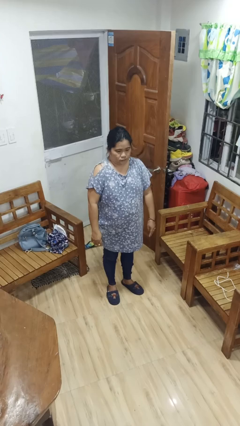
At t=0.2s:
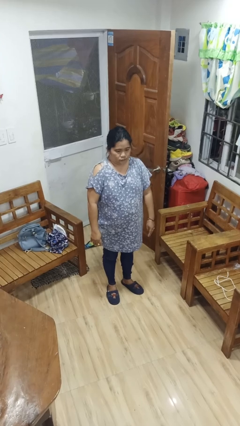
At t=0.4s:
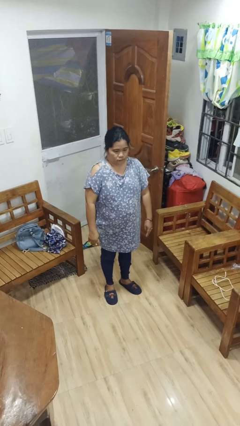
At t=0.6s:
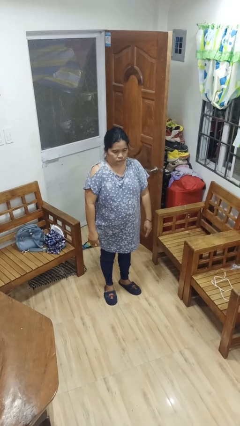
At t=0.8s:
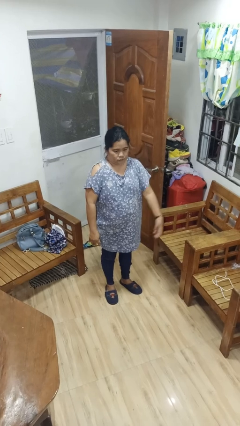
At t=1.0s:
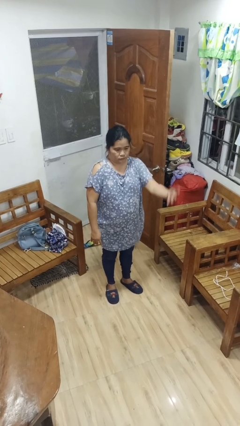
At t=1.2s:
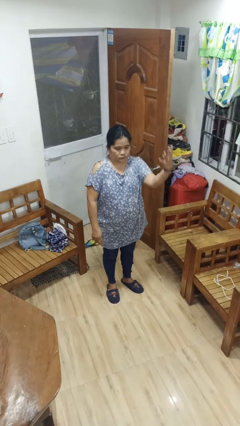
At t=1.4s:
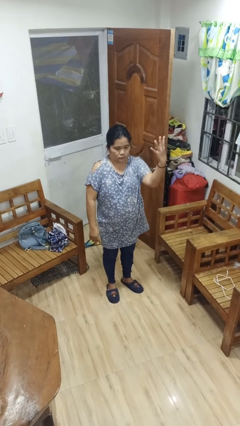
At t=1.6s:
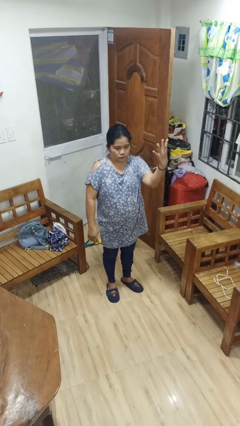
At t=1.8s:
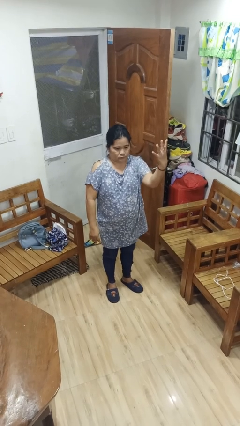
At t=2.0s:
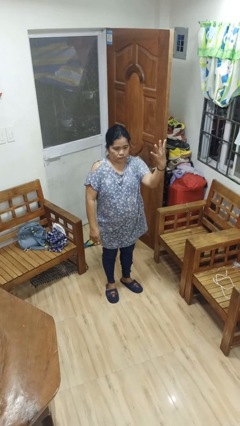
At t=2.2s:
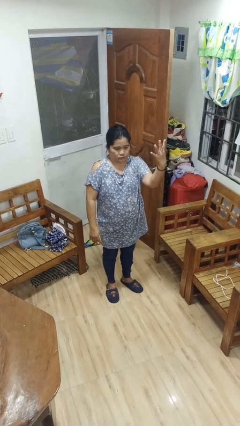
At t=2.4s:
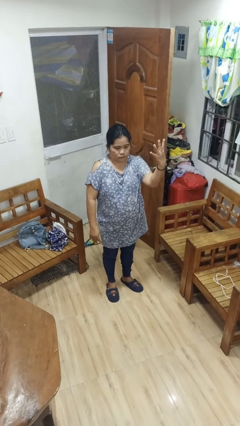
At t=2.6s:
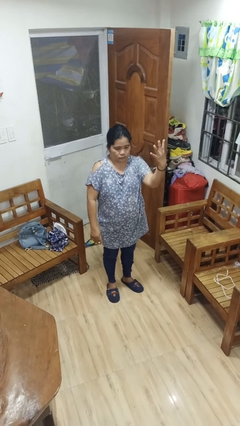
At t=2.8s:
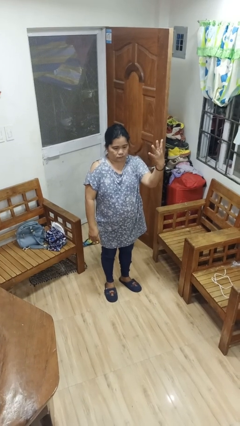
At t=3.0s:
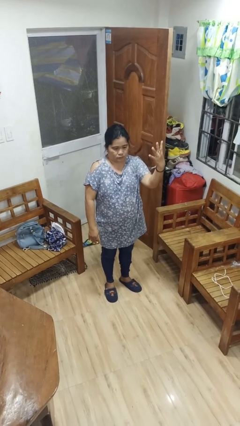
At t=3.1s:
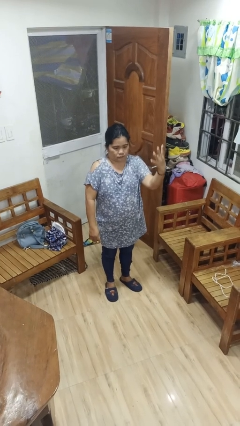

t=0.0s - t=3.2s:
person gestures number four

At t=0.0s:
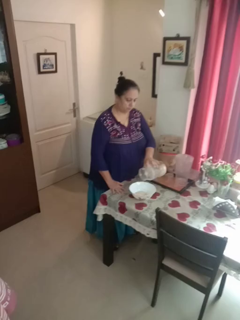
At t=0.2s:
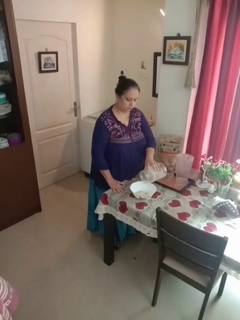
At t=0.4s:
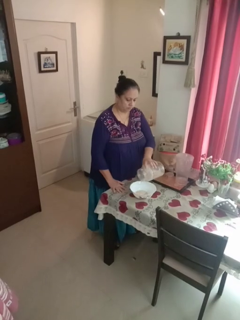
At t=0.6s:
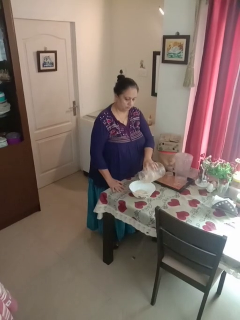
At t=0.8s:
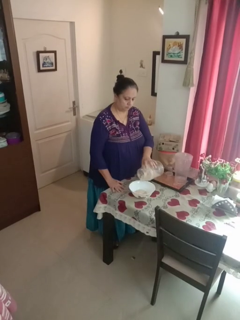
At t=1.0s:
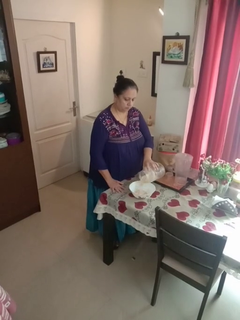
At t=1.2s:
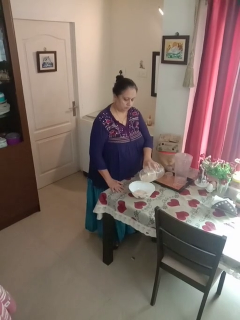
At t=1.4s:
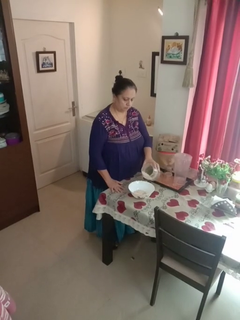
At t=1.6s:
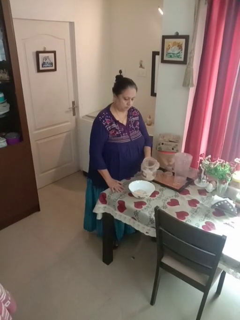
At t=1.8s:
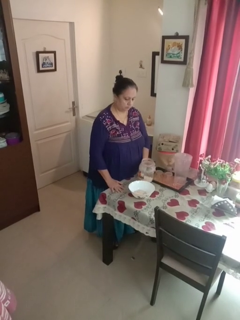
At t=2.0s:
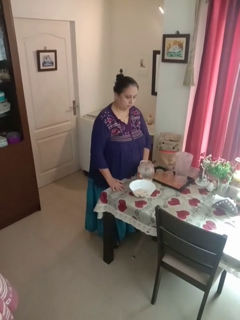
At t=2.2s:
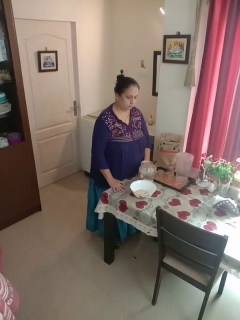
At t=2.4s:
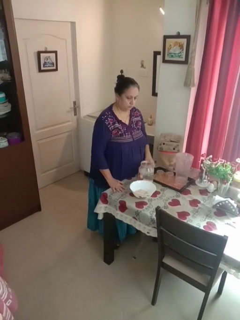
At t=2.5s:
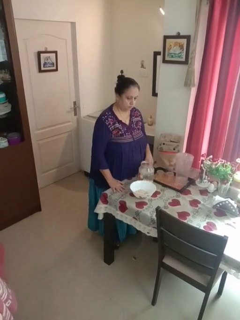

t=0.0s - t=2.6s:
person pours into bowl

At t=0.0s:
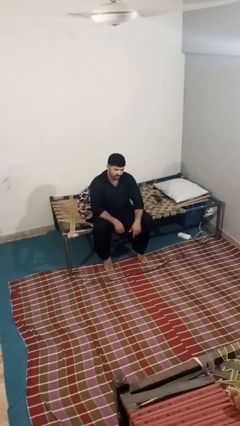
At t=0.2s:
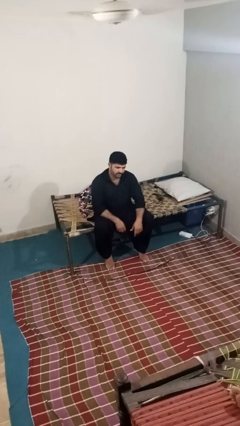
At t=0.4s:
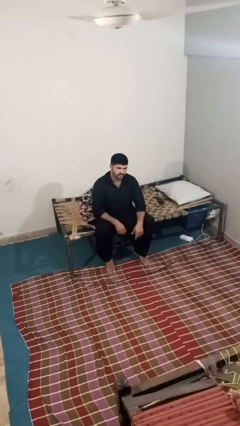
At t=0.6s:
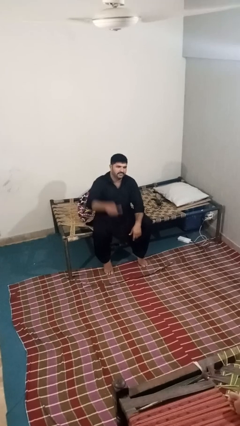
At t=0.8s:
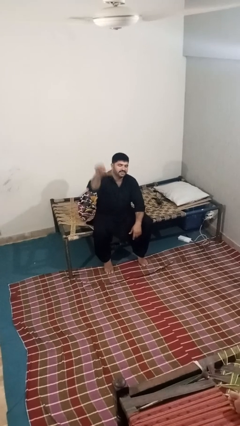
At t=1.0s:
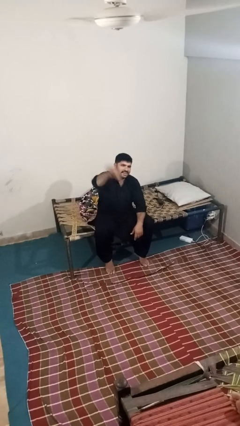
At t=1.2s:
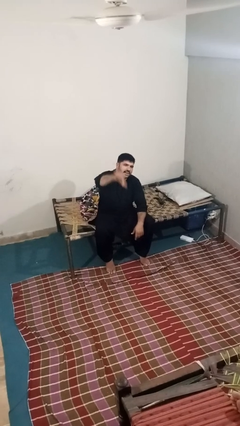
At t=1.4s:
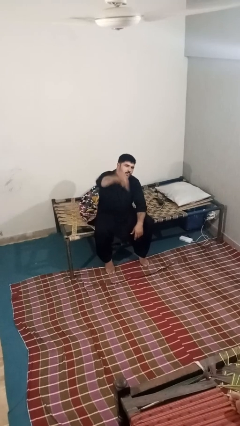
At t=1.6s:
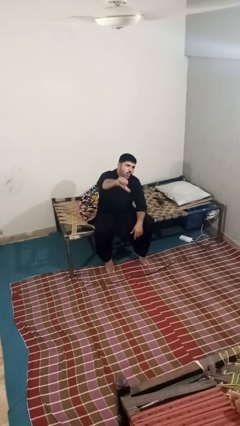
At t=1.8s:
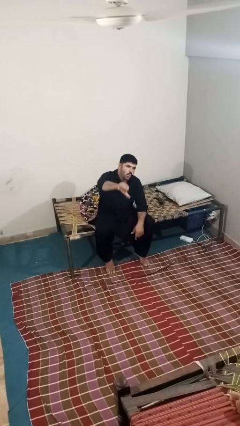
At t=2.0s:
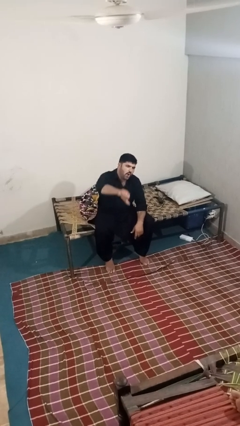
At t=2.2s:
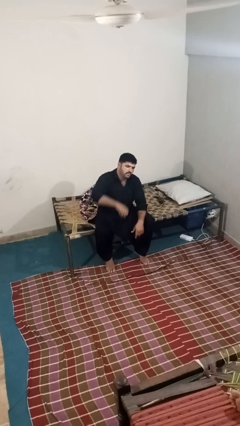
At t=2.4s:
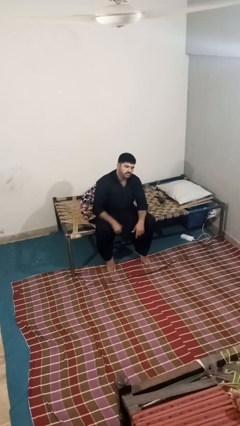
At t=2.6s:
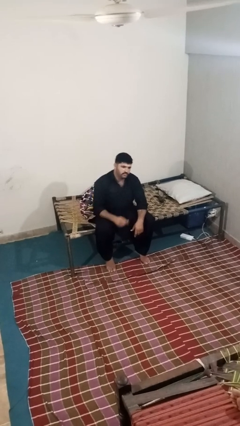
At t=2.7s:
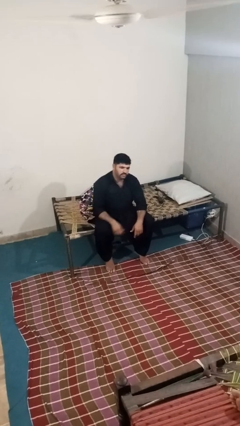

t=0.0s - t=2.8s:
person gestures thumbs down

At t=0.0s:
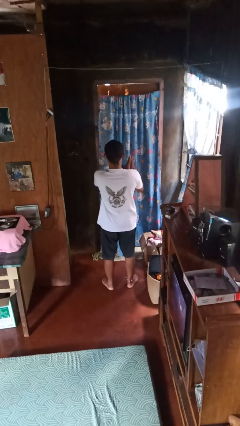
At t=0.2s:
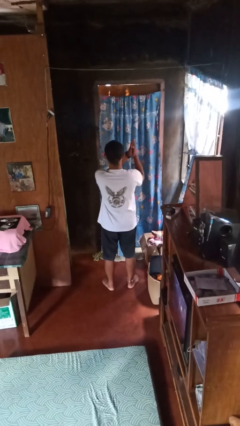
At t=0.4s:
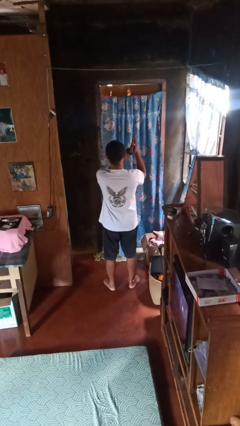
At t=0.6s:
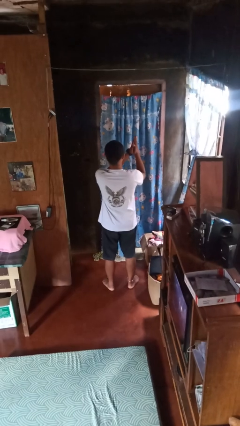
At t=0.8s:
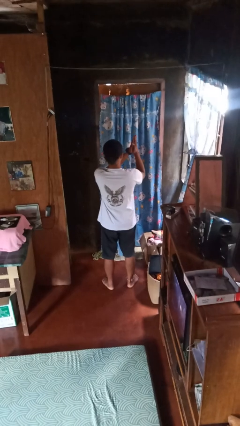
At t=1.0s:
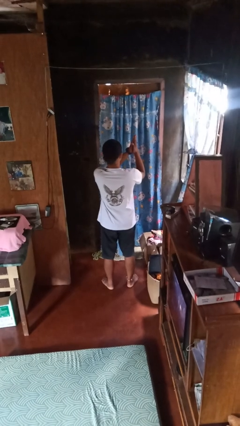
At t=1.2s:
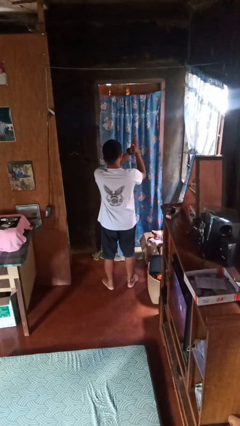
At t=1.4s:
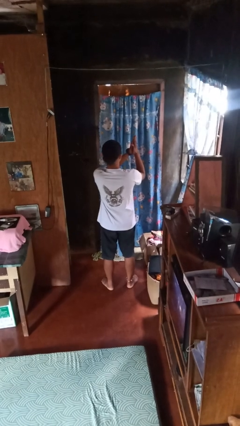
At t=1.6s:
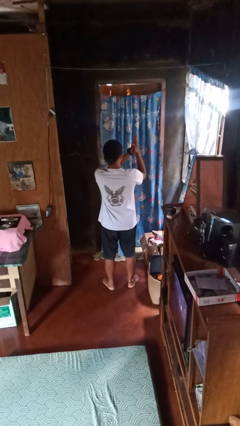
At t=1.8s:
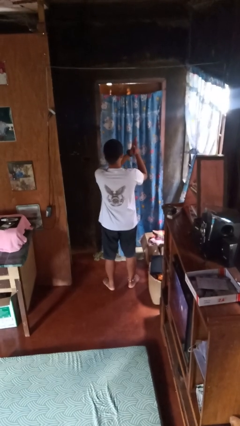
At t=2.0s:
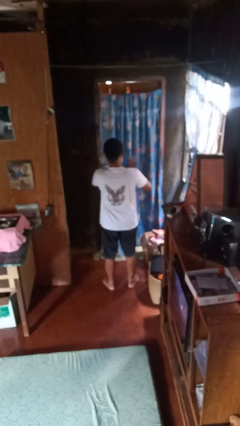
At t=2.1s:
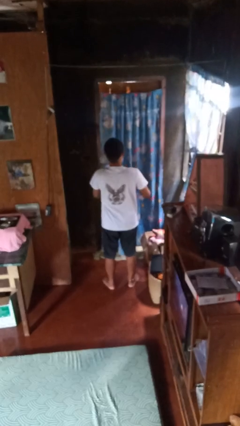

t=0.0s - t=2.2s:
person prays

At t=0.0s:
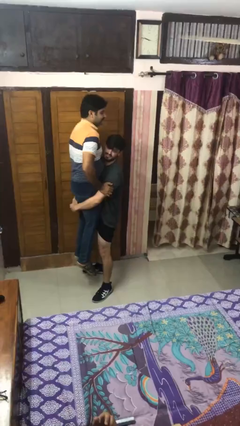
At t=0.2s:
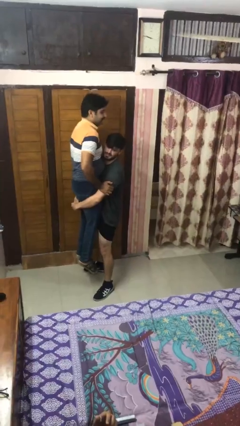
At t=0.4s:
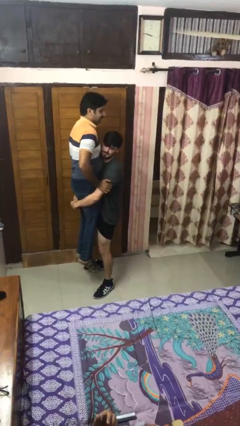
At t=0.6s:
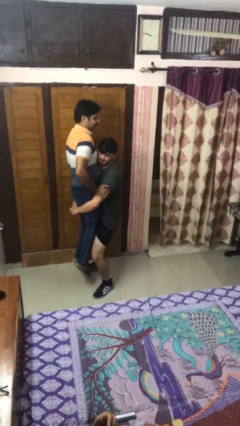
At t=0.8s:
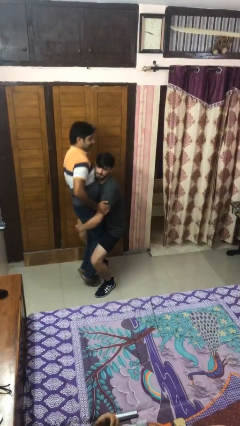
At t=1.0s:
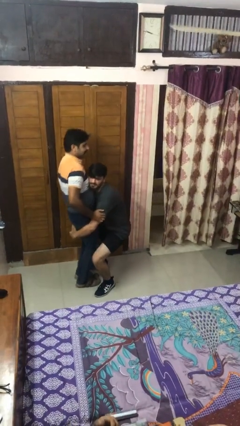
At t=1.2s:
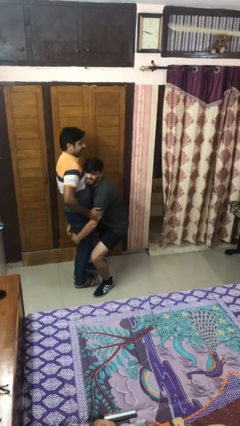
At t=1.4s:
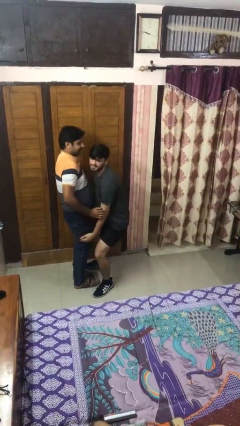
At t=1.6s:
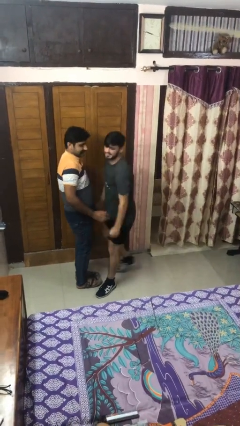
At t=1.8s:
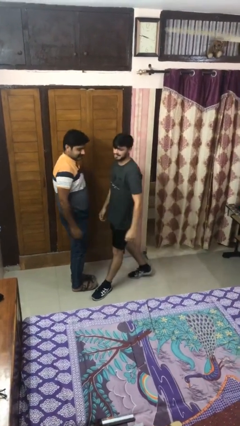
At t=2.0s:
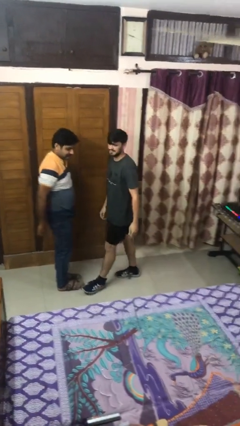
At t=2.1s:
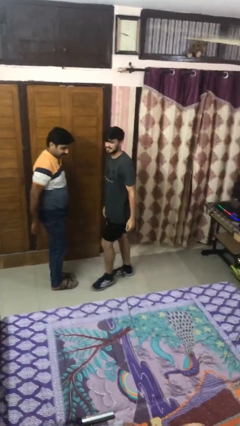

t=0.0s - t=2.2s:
person puts down person

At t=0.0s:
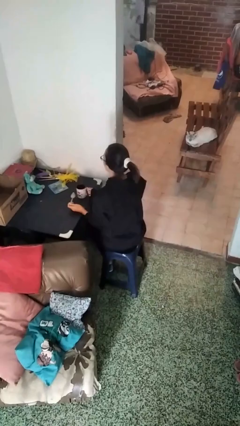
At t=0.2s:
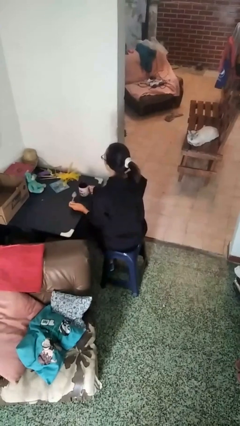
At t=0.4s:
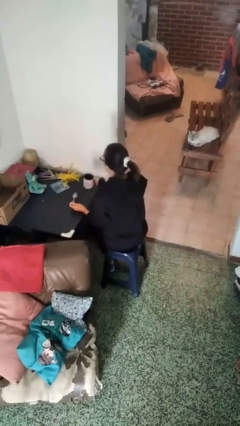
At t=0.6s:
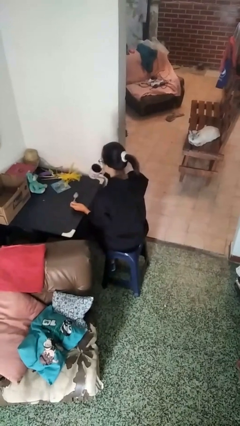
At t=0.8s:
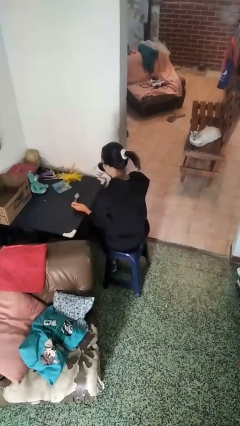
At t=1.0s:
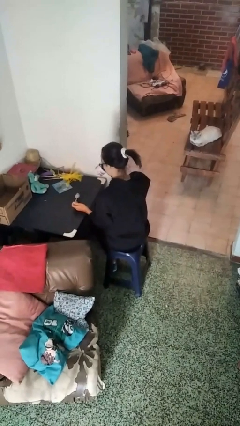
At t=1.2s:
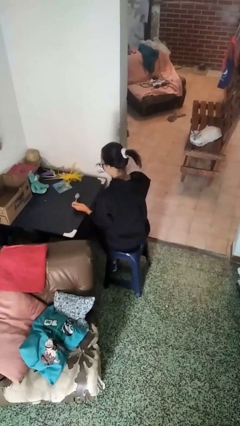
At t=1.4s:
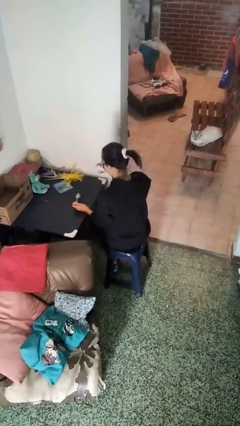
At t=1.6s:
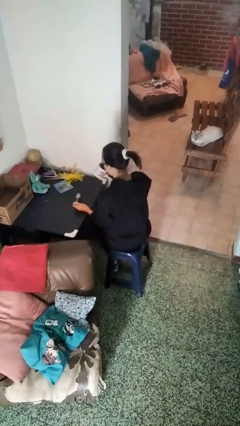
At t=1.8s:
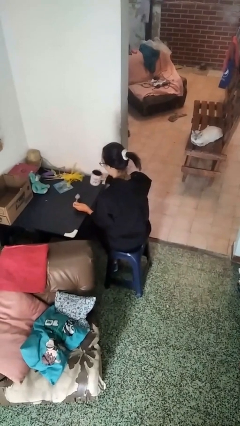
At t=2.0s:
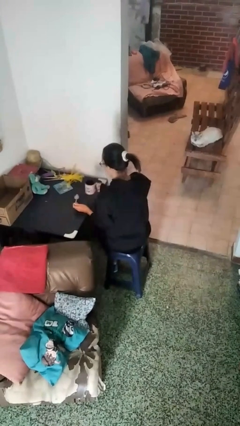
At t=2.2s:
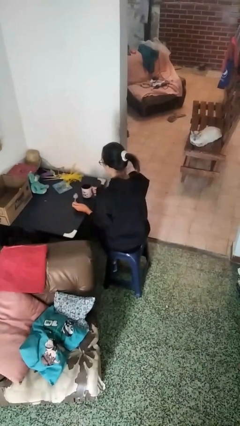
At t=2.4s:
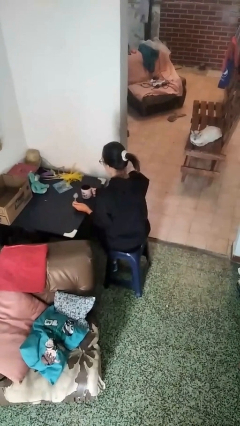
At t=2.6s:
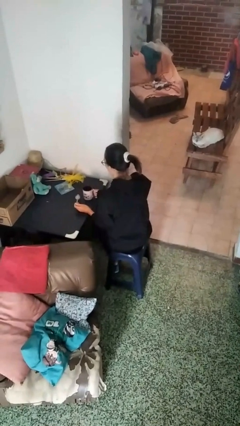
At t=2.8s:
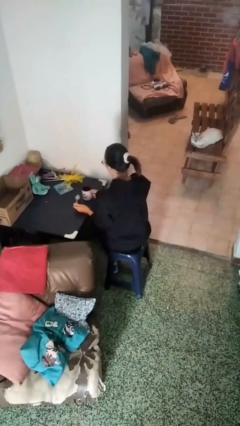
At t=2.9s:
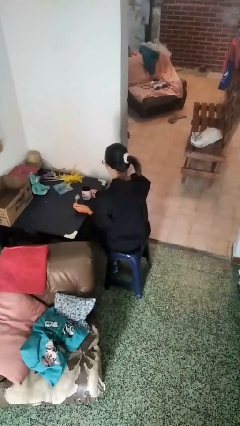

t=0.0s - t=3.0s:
person drinks from mug

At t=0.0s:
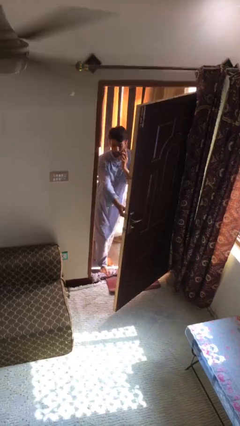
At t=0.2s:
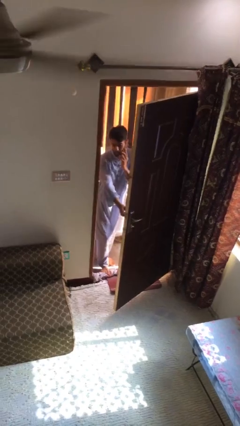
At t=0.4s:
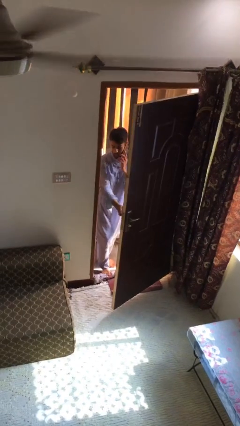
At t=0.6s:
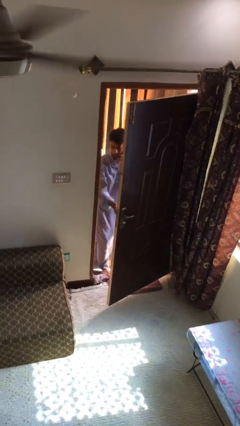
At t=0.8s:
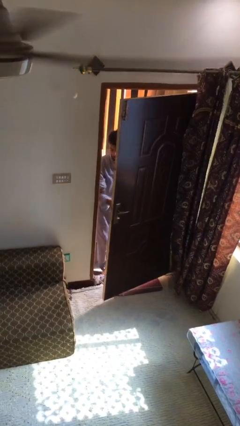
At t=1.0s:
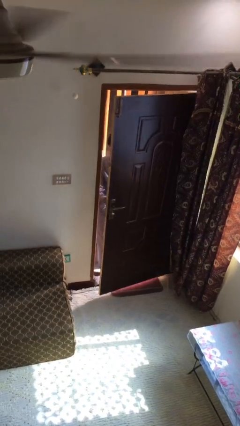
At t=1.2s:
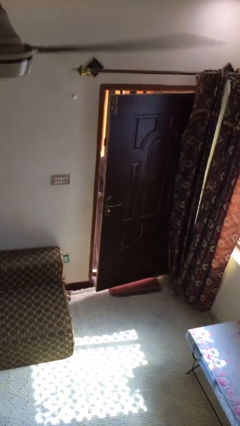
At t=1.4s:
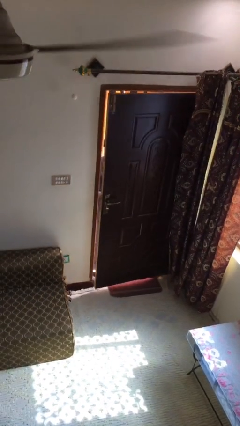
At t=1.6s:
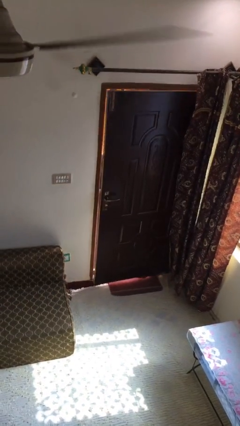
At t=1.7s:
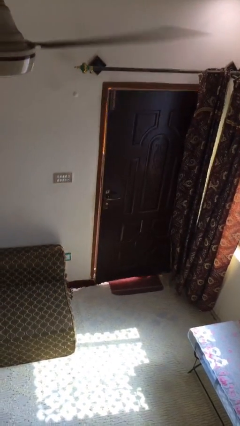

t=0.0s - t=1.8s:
person closes facility door

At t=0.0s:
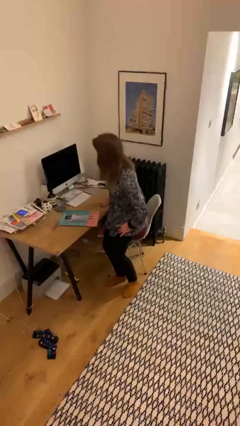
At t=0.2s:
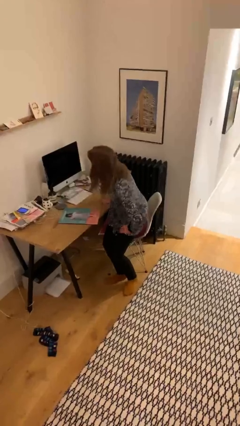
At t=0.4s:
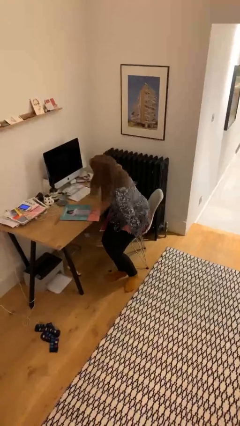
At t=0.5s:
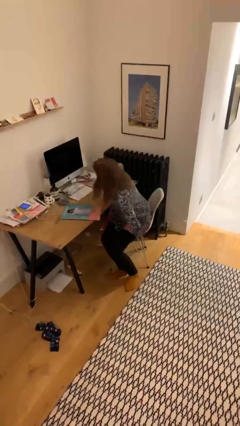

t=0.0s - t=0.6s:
person sits down
